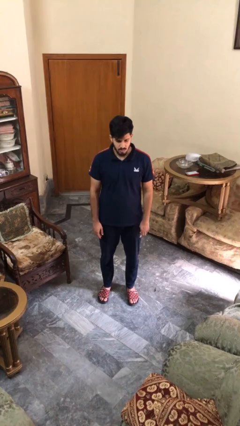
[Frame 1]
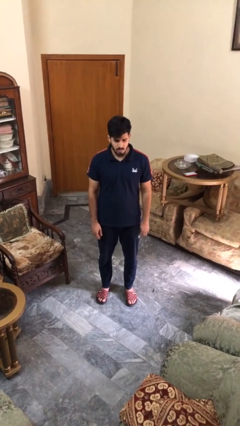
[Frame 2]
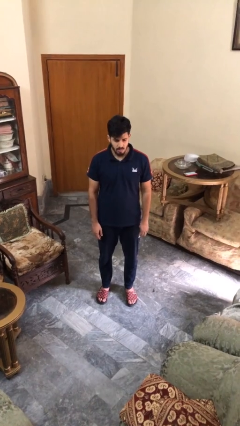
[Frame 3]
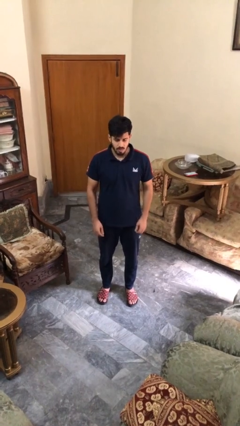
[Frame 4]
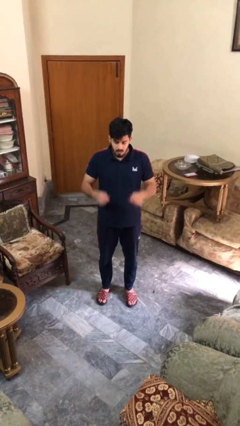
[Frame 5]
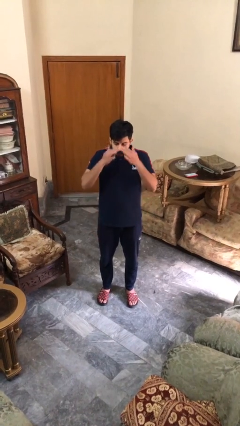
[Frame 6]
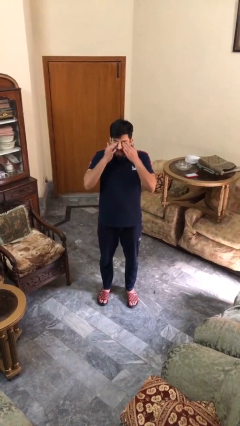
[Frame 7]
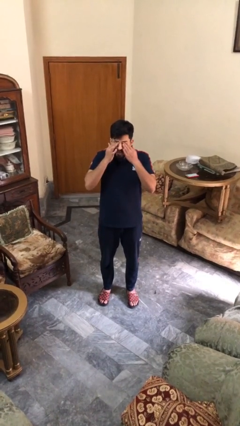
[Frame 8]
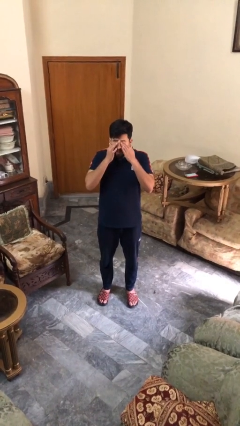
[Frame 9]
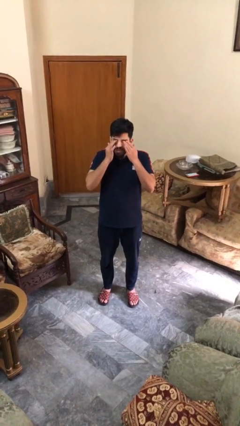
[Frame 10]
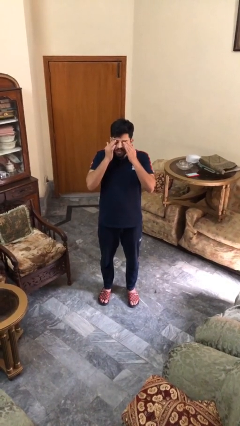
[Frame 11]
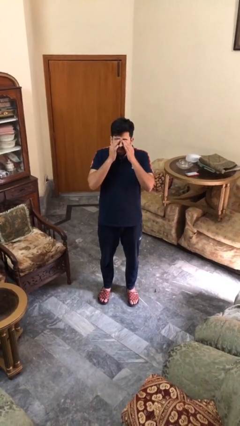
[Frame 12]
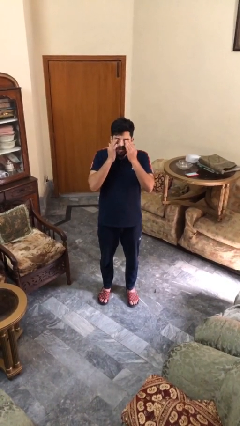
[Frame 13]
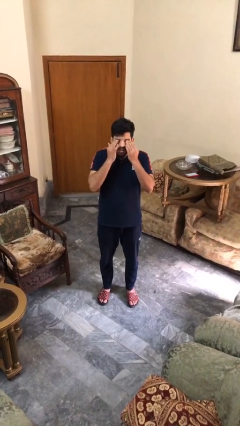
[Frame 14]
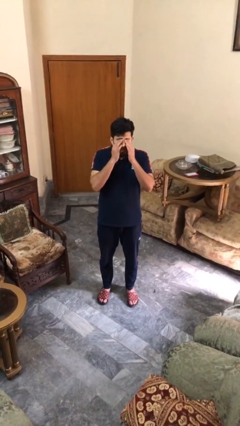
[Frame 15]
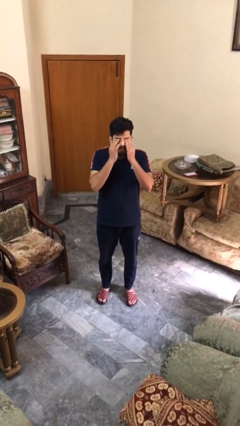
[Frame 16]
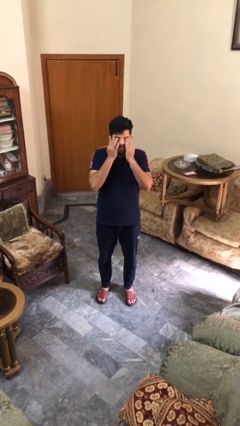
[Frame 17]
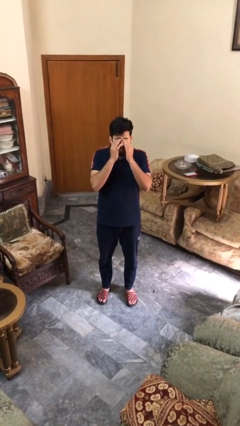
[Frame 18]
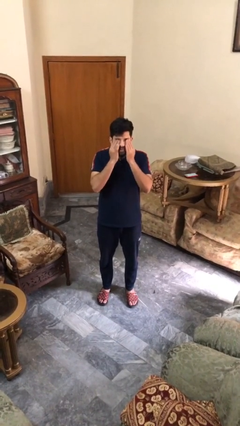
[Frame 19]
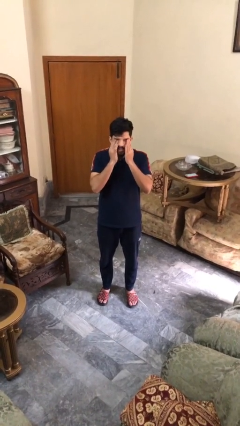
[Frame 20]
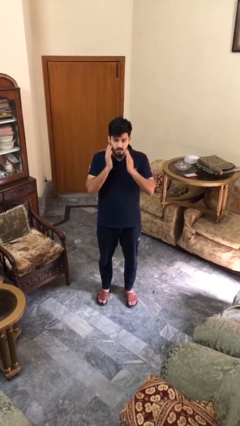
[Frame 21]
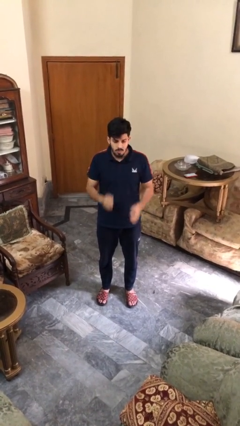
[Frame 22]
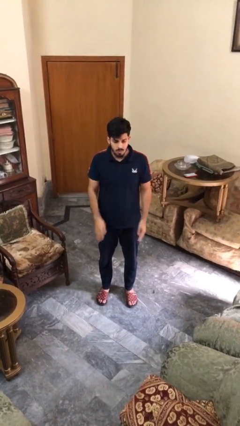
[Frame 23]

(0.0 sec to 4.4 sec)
person rubs eyes

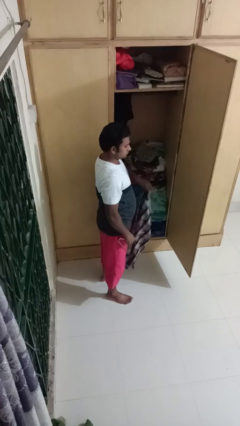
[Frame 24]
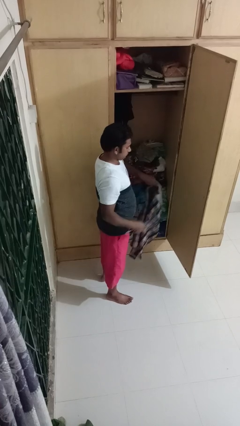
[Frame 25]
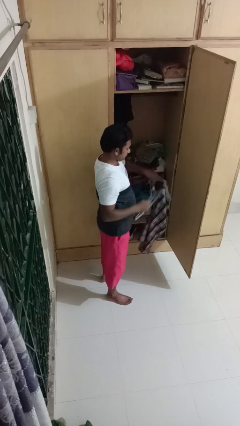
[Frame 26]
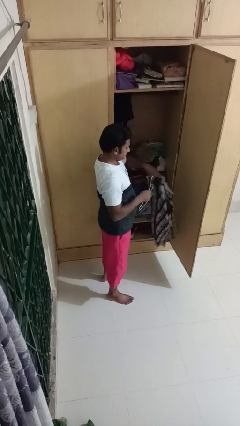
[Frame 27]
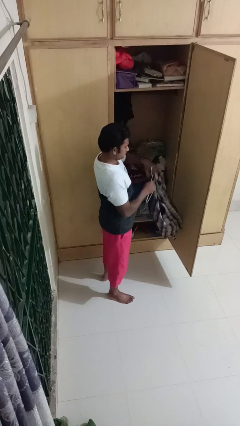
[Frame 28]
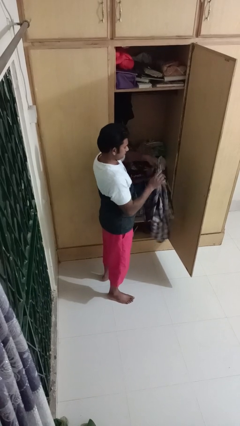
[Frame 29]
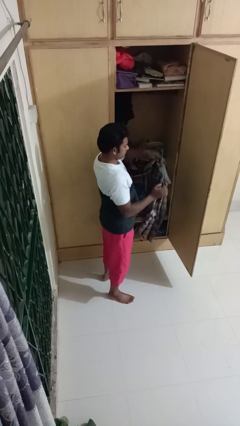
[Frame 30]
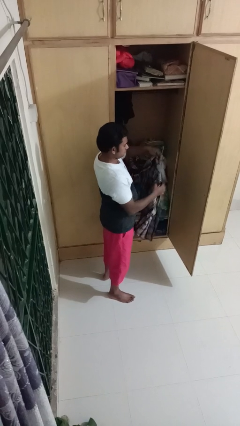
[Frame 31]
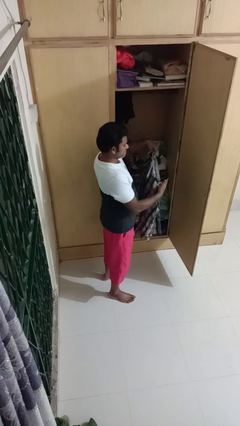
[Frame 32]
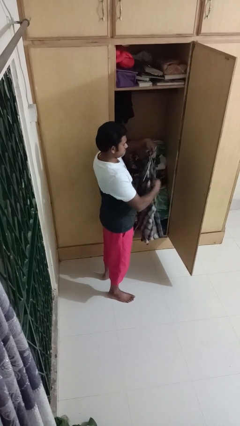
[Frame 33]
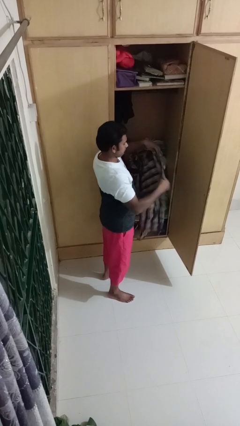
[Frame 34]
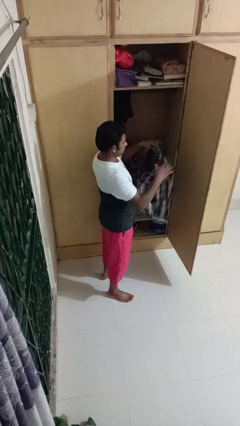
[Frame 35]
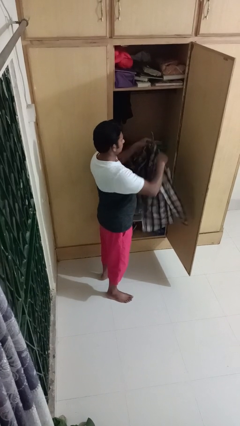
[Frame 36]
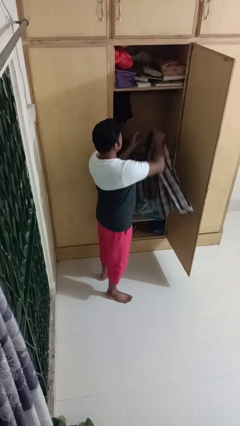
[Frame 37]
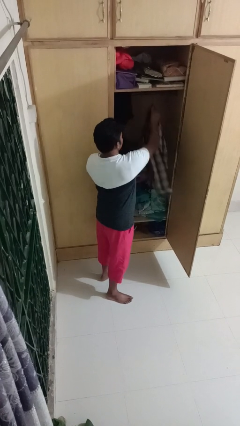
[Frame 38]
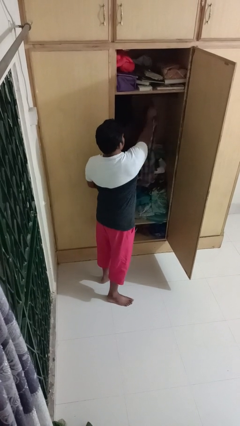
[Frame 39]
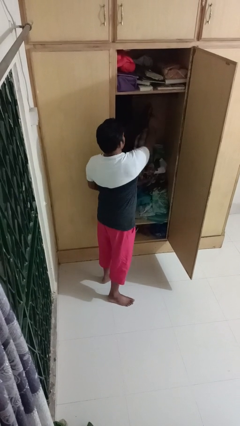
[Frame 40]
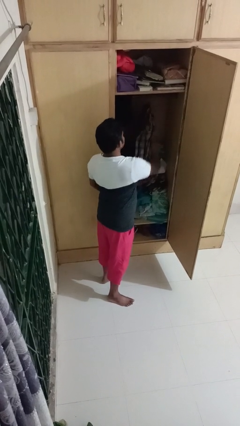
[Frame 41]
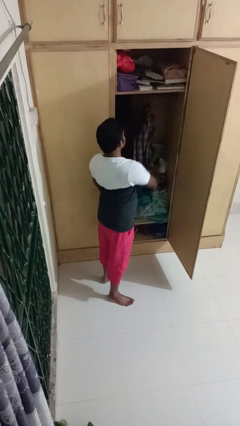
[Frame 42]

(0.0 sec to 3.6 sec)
person puts clothes into closet

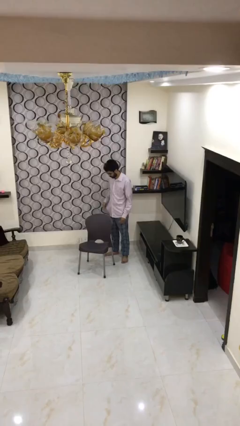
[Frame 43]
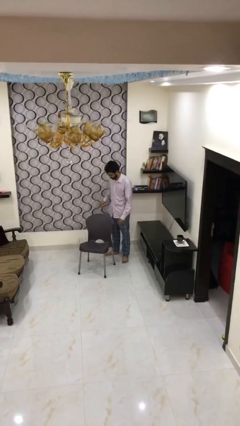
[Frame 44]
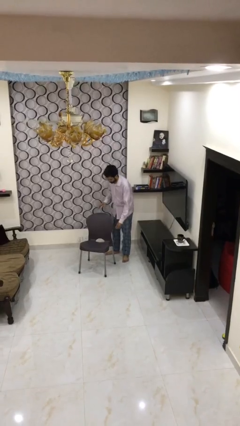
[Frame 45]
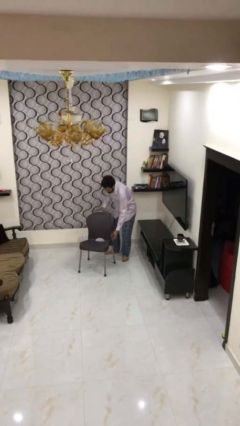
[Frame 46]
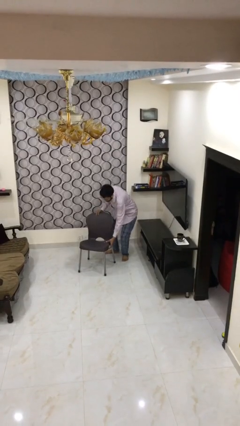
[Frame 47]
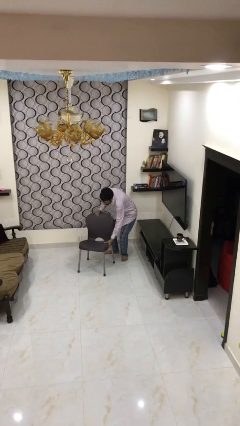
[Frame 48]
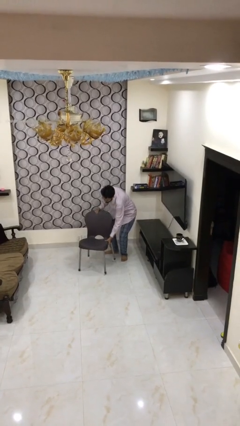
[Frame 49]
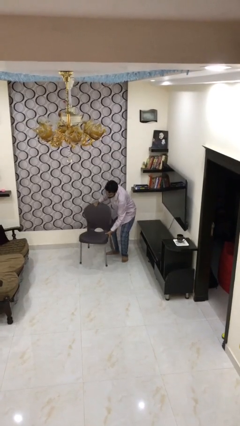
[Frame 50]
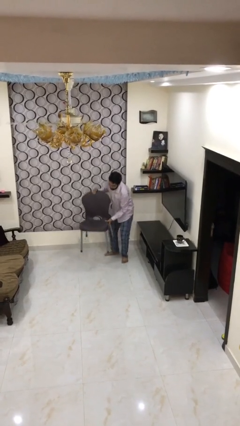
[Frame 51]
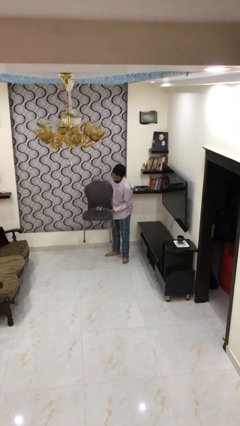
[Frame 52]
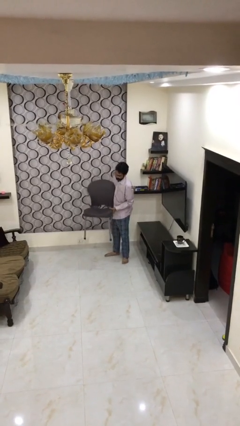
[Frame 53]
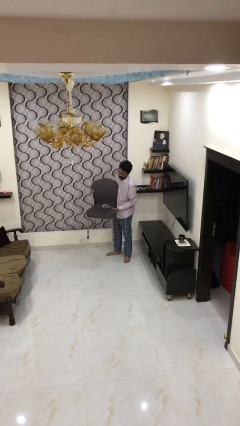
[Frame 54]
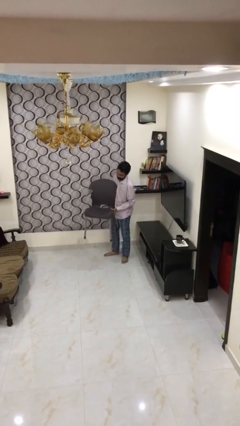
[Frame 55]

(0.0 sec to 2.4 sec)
person picks up object from floor

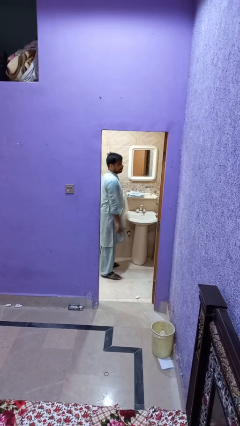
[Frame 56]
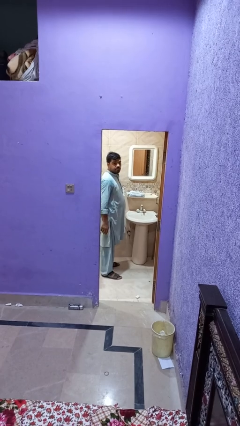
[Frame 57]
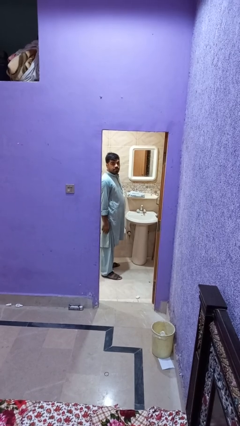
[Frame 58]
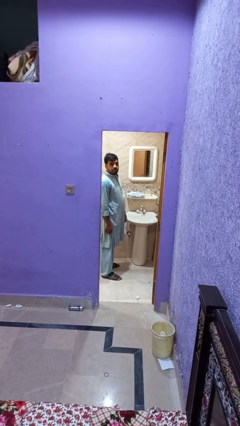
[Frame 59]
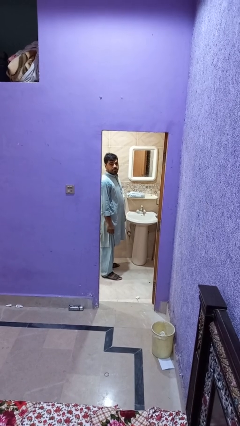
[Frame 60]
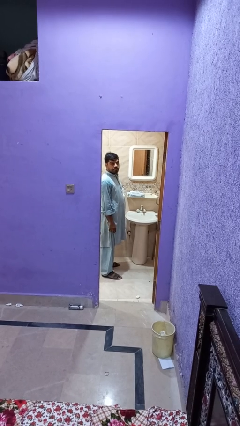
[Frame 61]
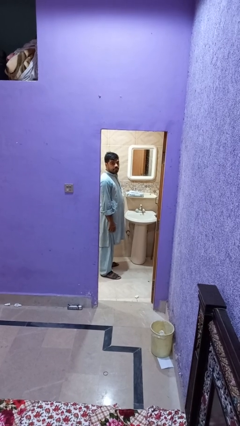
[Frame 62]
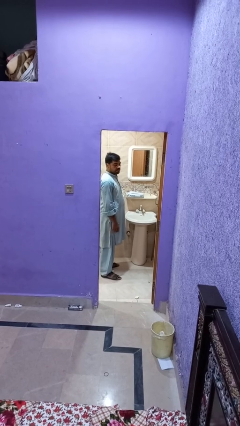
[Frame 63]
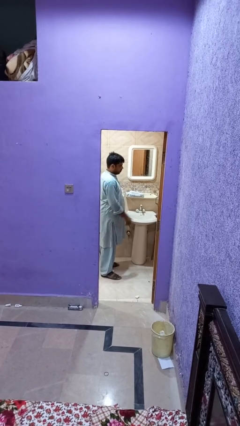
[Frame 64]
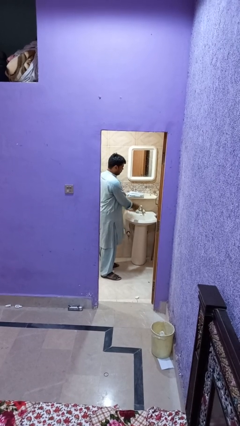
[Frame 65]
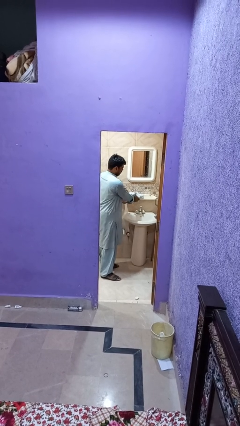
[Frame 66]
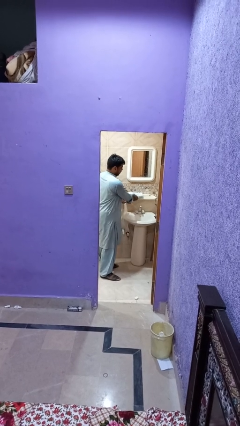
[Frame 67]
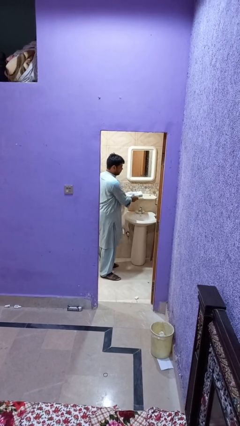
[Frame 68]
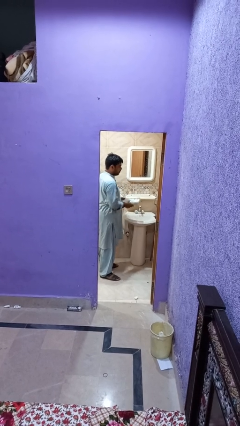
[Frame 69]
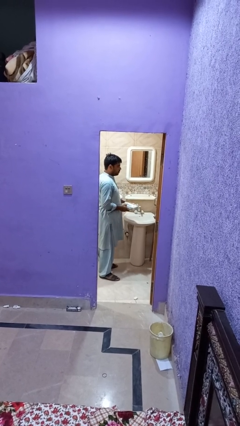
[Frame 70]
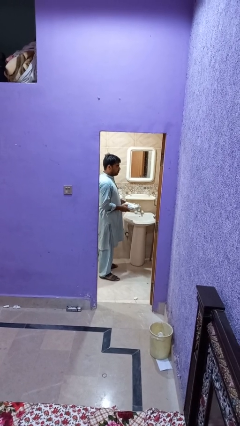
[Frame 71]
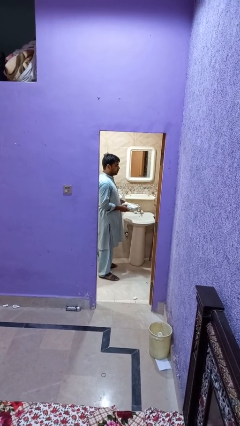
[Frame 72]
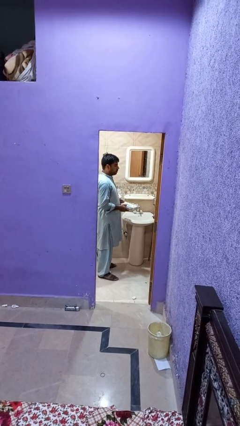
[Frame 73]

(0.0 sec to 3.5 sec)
person picks up object from countertop

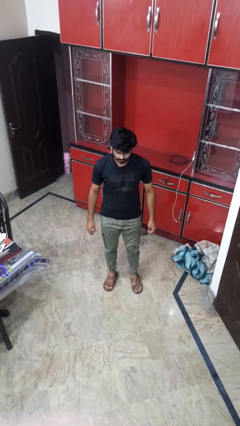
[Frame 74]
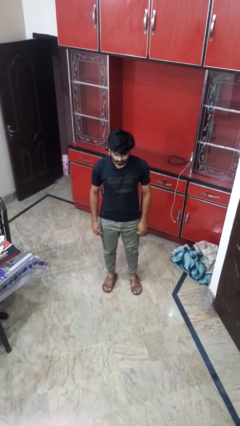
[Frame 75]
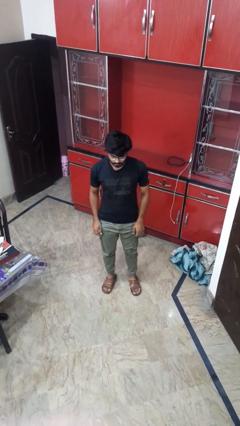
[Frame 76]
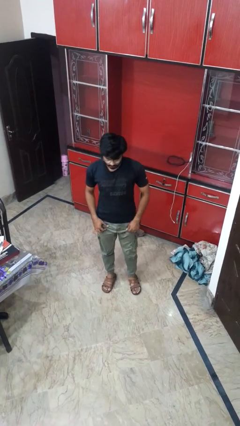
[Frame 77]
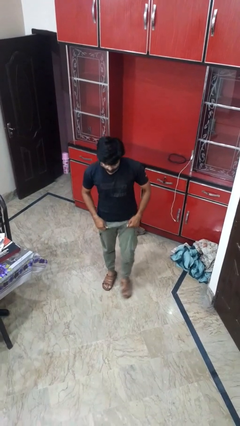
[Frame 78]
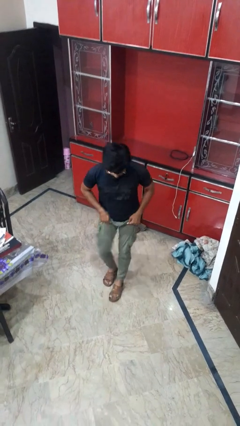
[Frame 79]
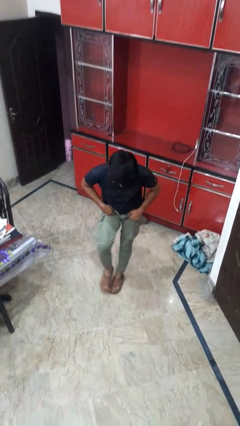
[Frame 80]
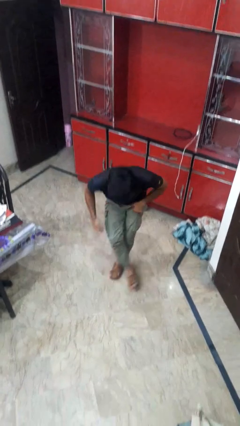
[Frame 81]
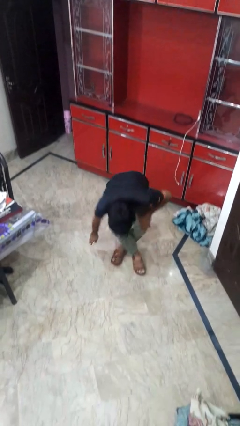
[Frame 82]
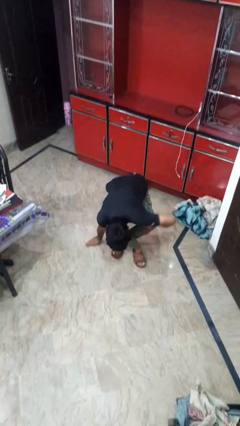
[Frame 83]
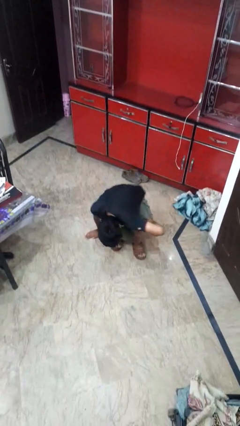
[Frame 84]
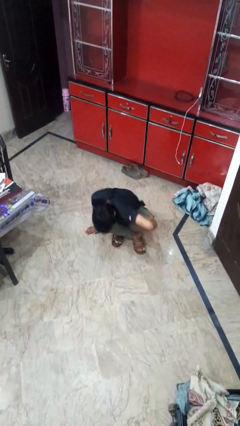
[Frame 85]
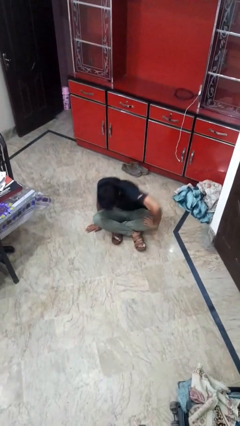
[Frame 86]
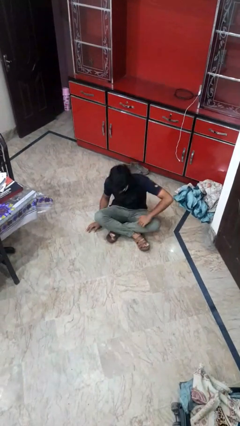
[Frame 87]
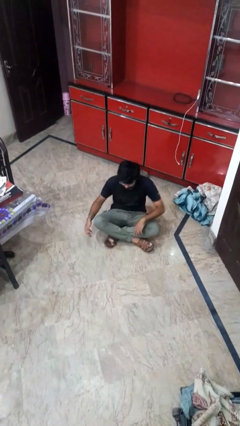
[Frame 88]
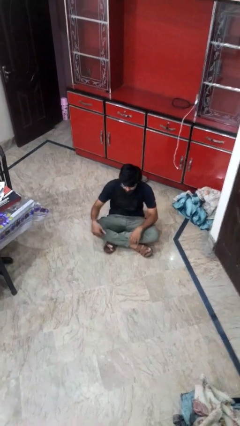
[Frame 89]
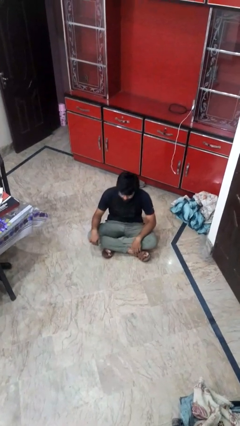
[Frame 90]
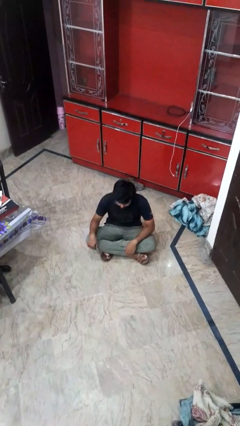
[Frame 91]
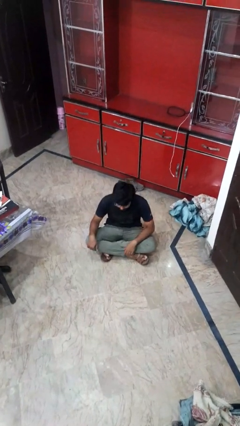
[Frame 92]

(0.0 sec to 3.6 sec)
person sits crisscross

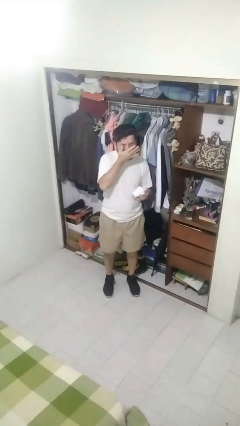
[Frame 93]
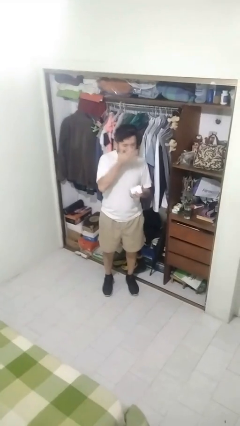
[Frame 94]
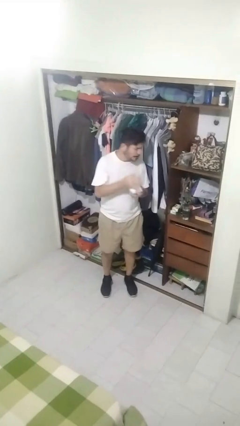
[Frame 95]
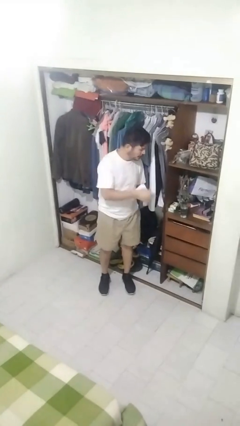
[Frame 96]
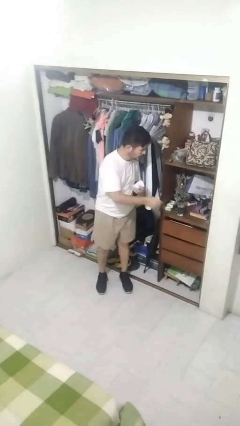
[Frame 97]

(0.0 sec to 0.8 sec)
person takes medicine pills
